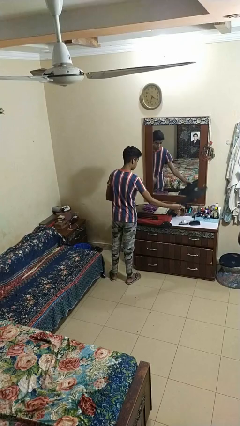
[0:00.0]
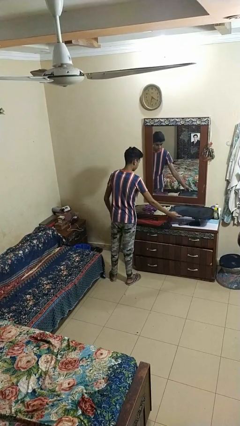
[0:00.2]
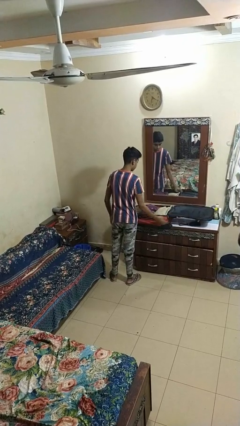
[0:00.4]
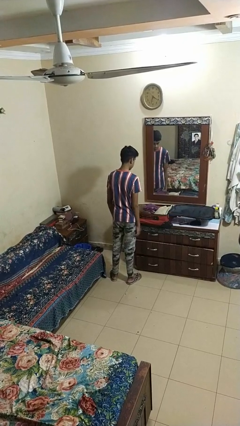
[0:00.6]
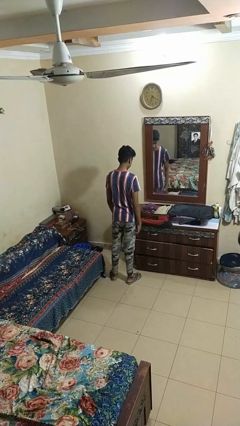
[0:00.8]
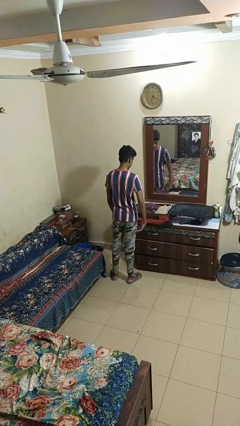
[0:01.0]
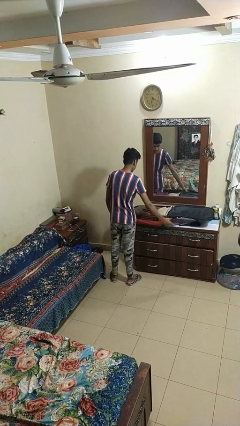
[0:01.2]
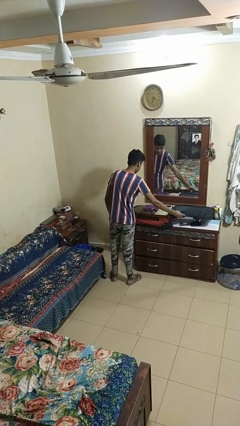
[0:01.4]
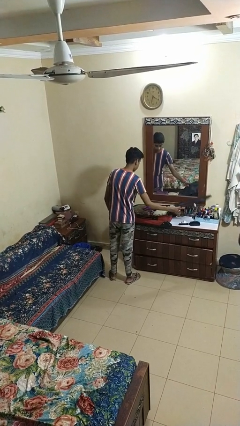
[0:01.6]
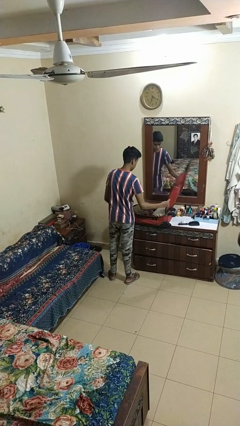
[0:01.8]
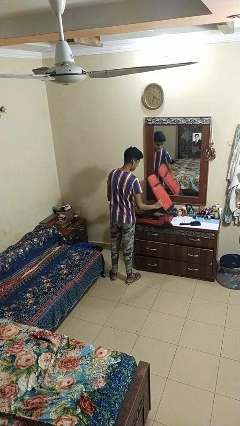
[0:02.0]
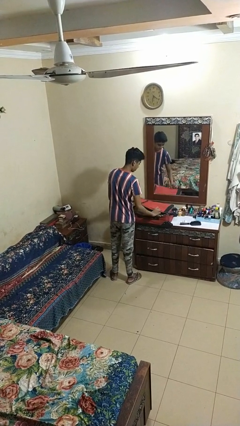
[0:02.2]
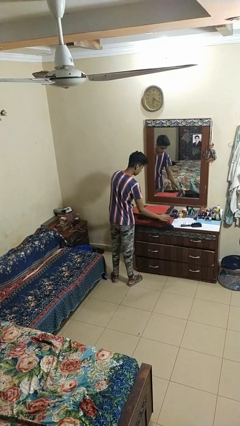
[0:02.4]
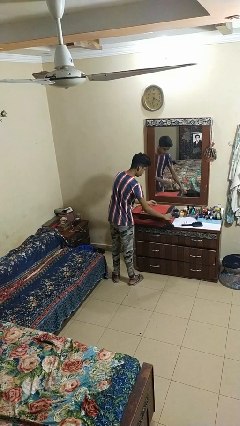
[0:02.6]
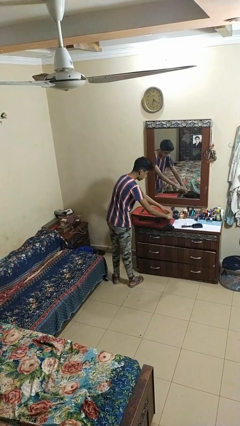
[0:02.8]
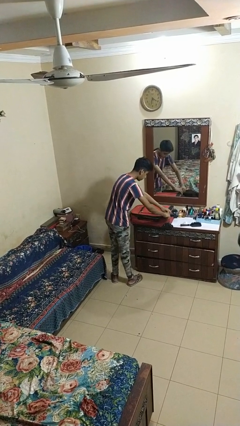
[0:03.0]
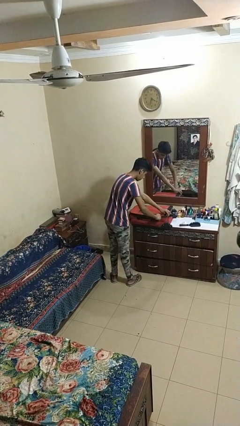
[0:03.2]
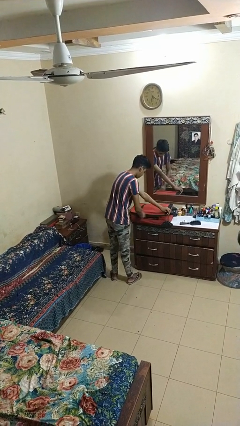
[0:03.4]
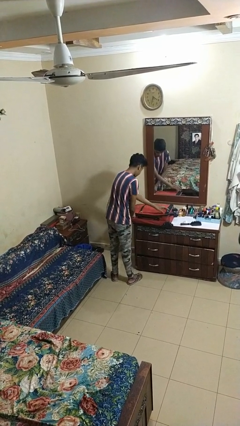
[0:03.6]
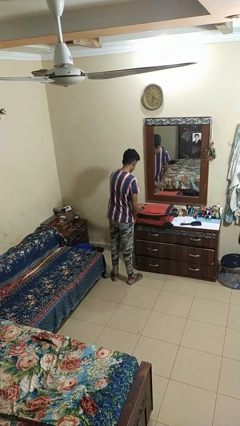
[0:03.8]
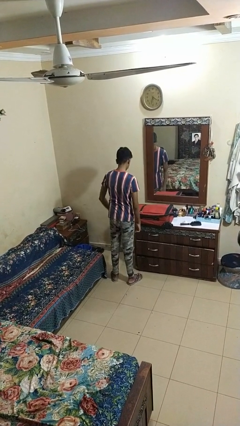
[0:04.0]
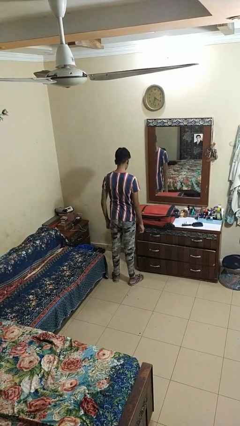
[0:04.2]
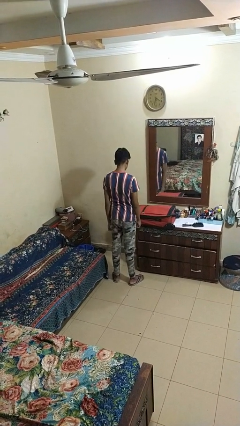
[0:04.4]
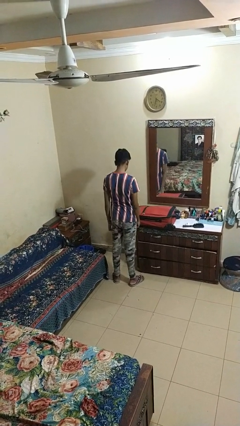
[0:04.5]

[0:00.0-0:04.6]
person closes suitcase

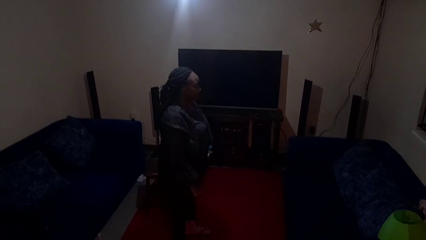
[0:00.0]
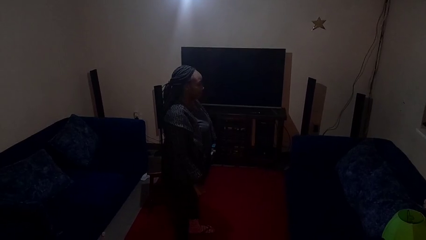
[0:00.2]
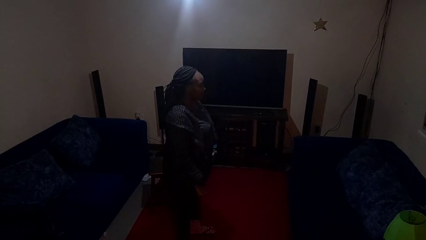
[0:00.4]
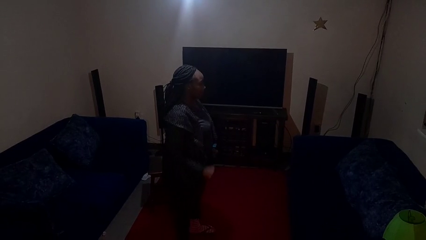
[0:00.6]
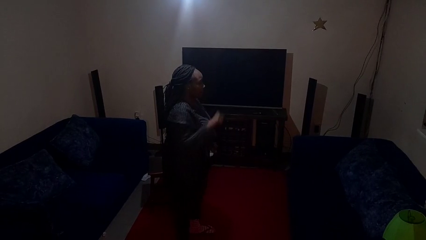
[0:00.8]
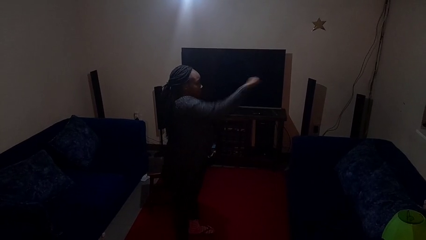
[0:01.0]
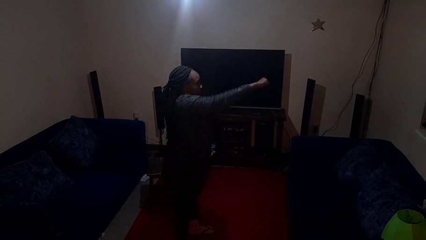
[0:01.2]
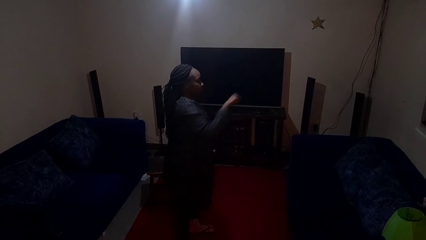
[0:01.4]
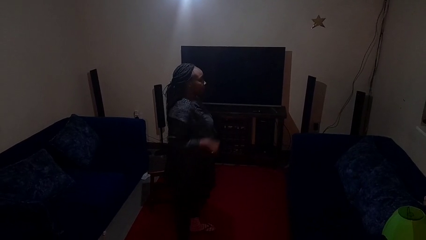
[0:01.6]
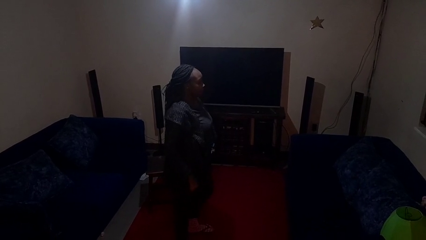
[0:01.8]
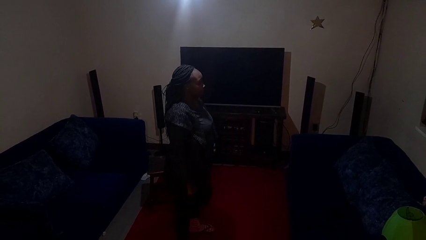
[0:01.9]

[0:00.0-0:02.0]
person punches

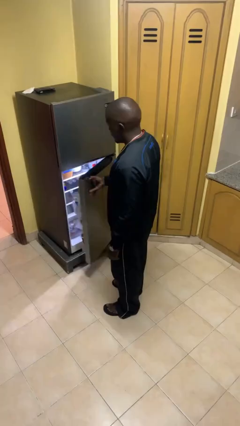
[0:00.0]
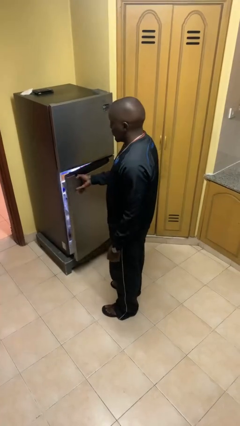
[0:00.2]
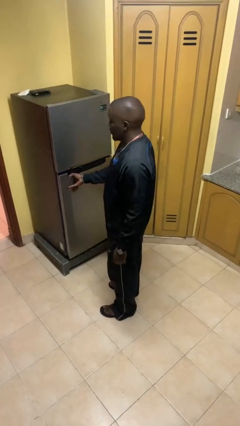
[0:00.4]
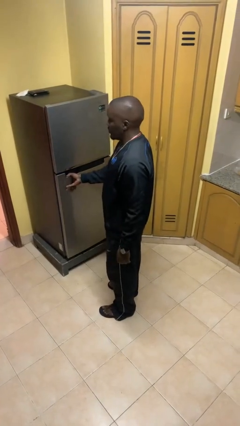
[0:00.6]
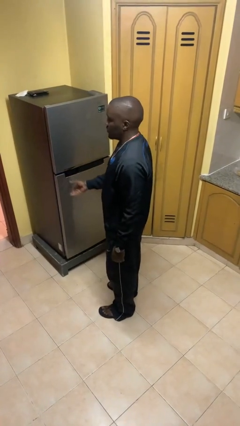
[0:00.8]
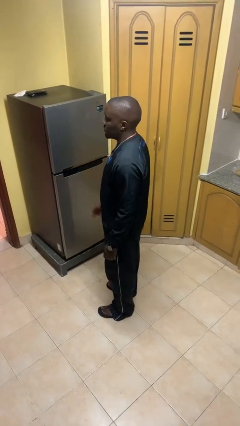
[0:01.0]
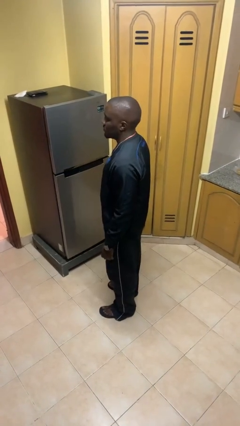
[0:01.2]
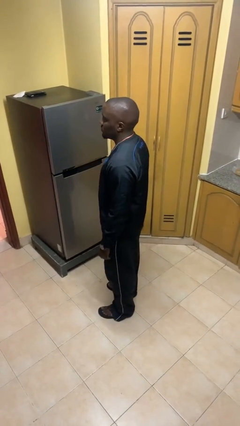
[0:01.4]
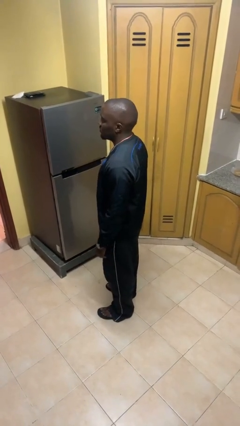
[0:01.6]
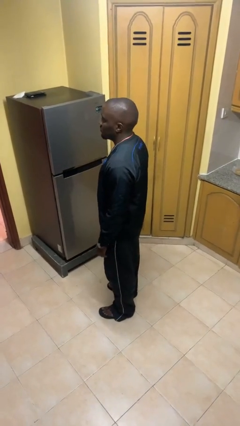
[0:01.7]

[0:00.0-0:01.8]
person closes refrigerator

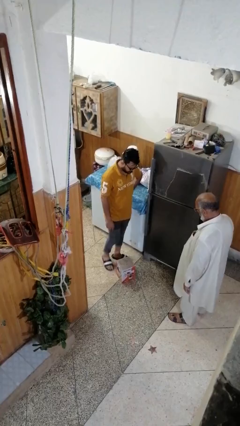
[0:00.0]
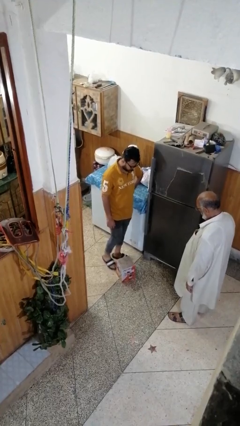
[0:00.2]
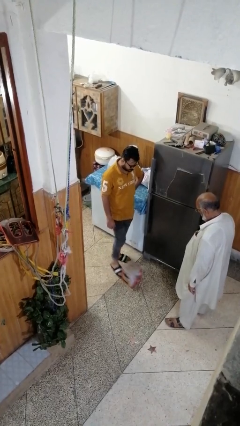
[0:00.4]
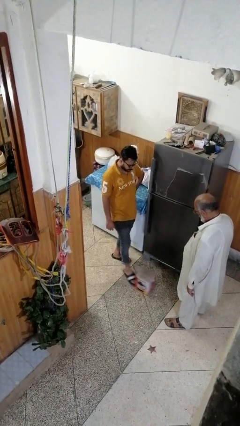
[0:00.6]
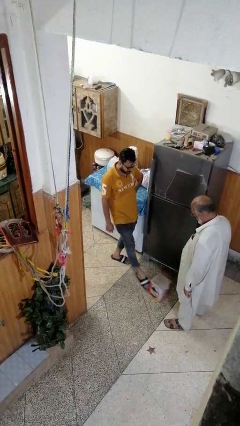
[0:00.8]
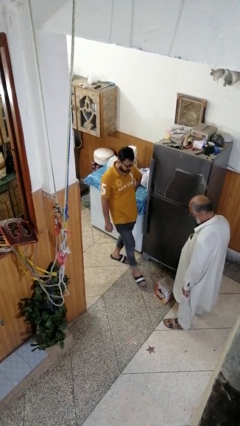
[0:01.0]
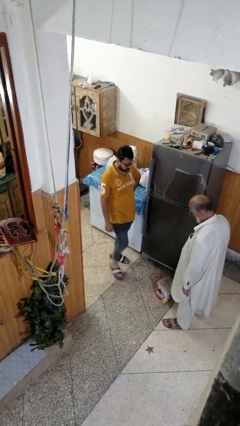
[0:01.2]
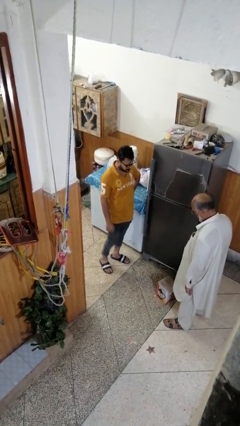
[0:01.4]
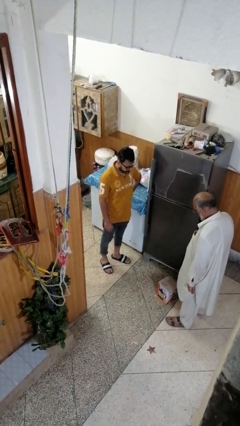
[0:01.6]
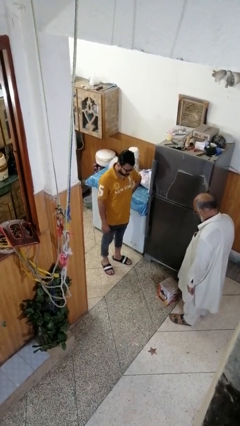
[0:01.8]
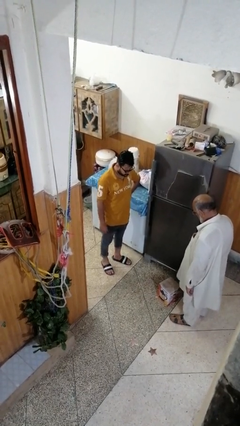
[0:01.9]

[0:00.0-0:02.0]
person kicks object to person

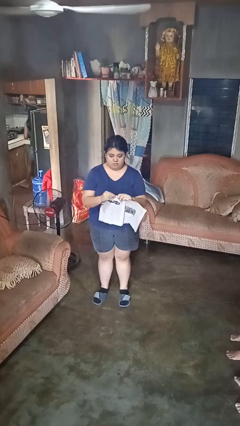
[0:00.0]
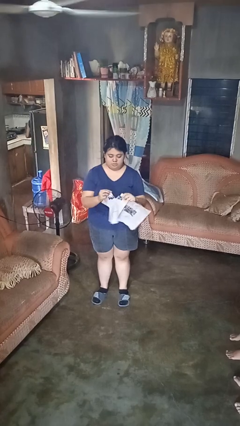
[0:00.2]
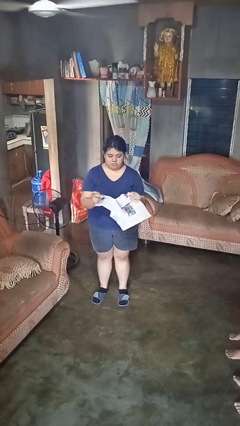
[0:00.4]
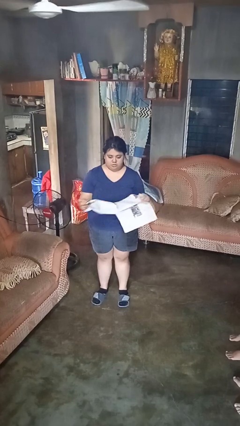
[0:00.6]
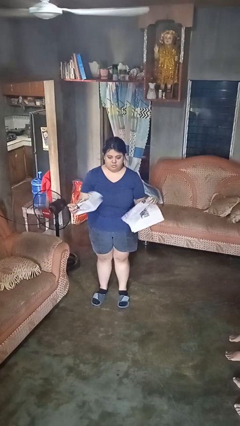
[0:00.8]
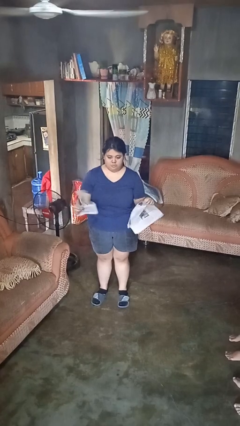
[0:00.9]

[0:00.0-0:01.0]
person tears paper

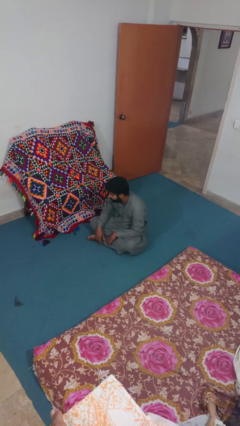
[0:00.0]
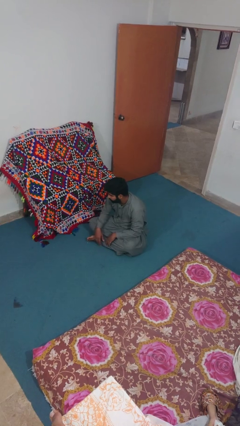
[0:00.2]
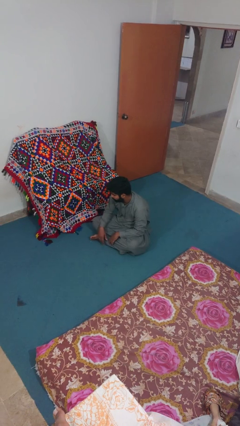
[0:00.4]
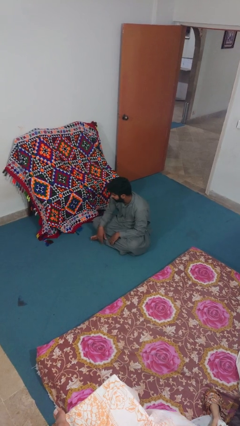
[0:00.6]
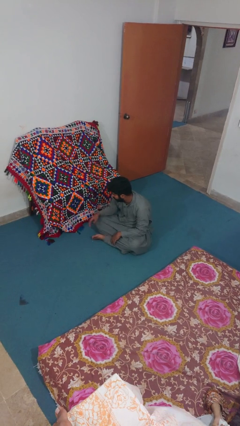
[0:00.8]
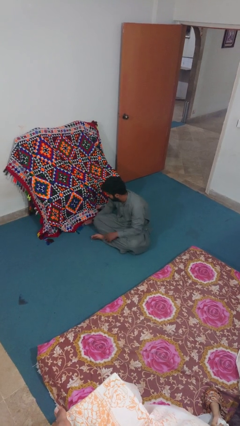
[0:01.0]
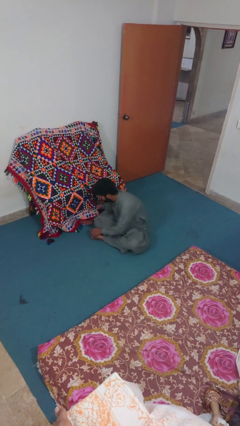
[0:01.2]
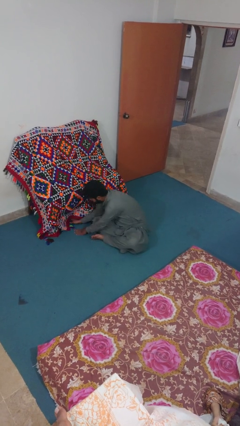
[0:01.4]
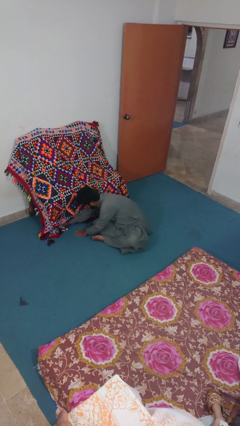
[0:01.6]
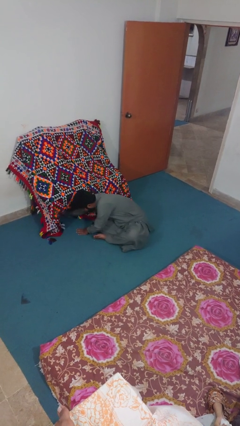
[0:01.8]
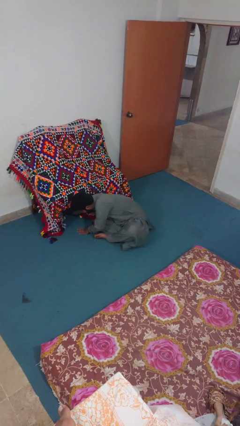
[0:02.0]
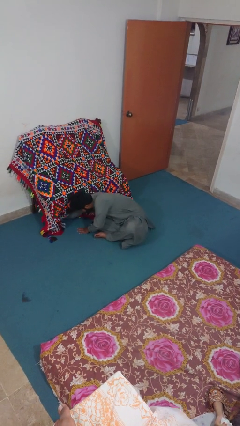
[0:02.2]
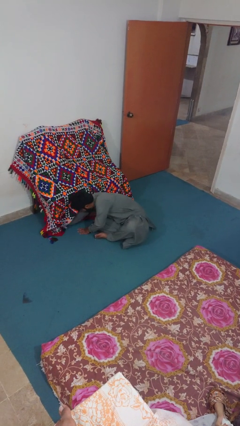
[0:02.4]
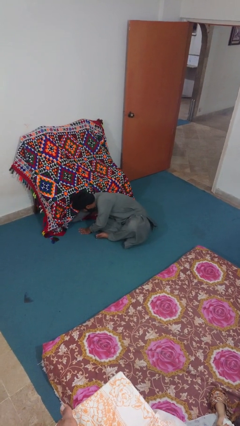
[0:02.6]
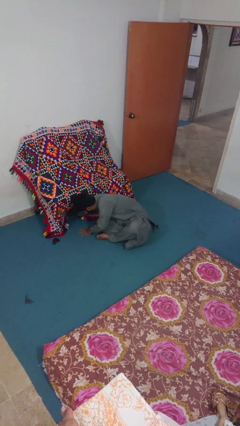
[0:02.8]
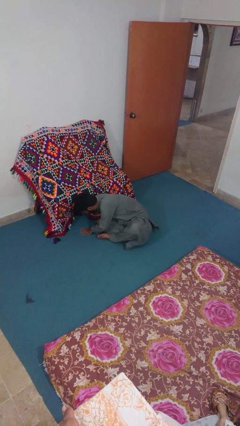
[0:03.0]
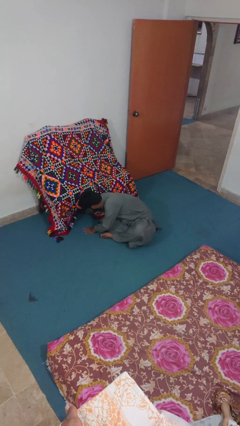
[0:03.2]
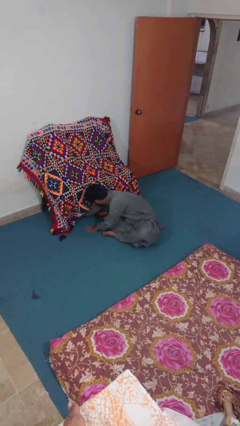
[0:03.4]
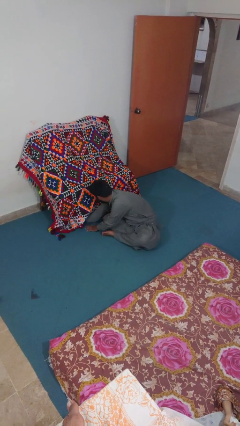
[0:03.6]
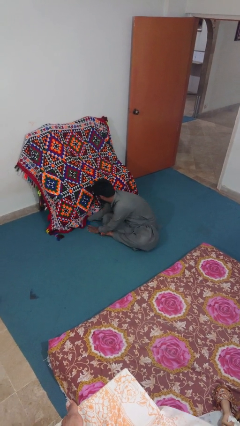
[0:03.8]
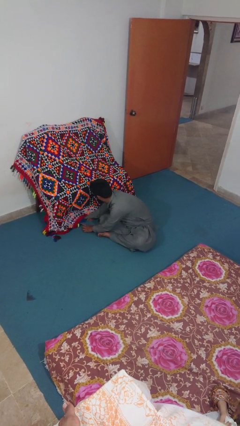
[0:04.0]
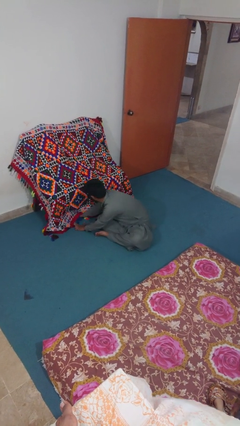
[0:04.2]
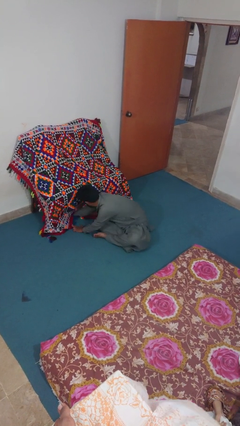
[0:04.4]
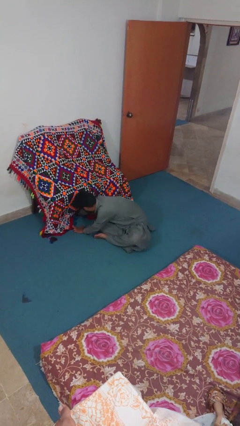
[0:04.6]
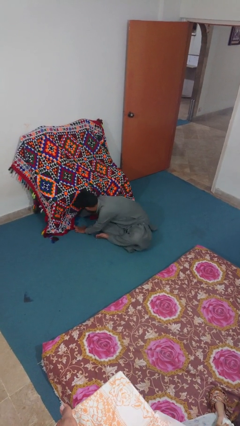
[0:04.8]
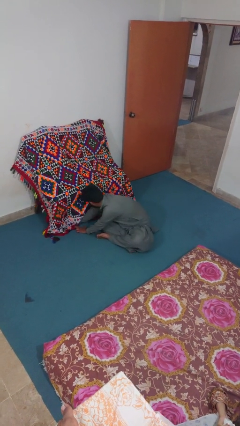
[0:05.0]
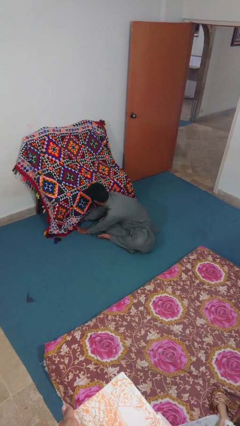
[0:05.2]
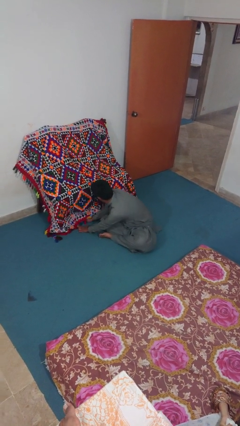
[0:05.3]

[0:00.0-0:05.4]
person searches under couch

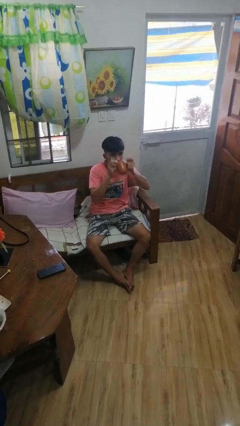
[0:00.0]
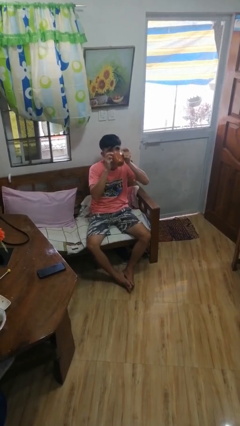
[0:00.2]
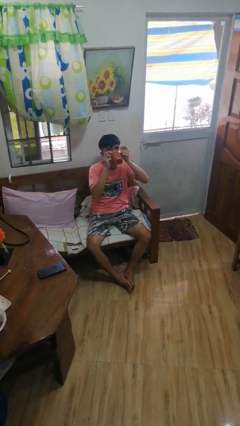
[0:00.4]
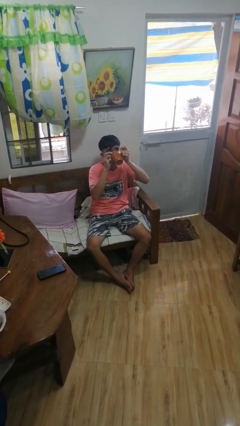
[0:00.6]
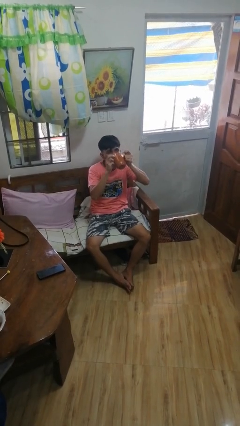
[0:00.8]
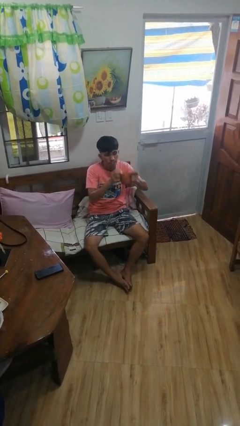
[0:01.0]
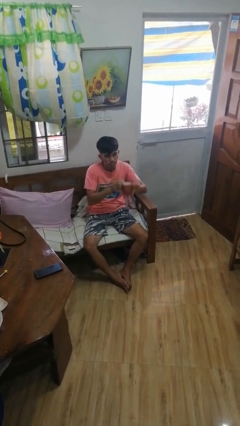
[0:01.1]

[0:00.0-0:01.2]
person drinks from mug
